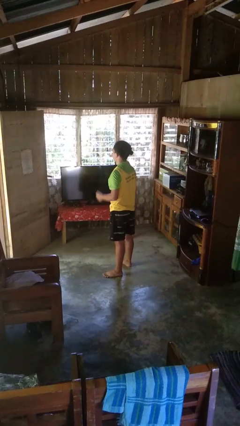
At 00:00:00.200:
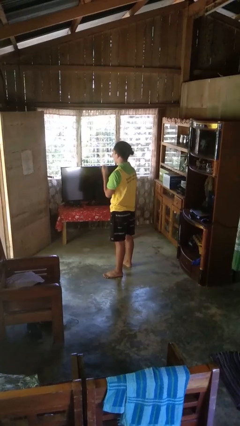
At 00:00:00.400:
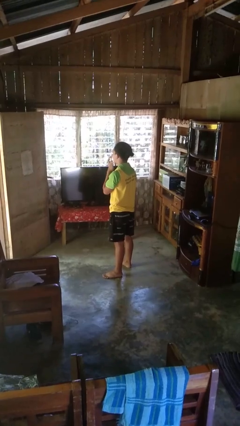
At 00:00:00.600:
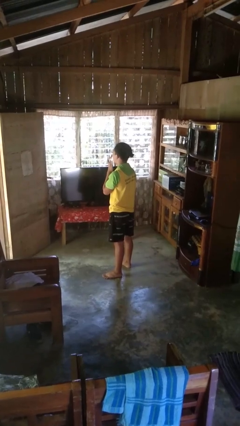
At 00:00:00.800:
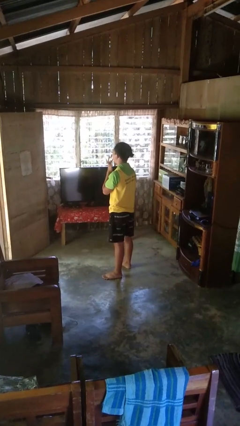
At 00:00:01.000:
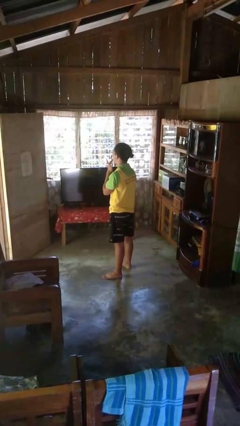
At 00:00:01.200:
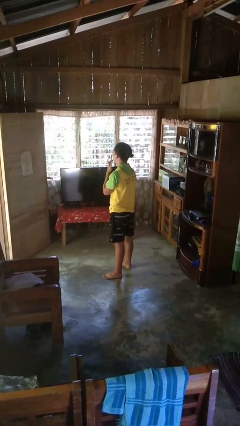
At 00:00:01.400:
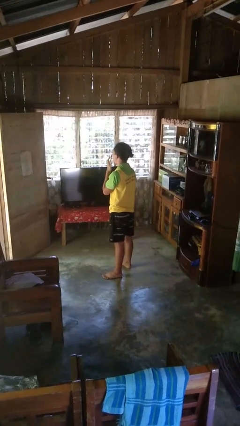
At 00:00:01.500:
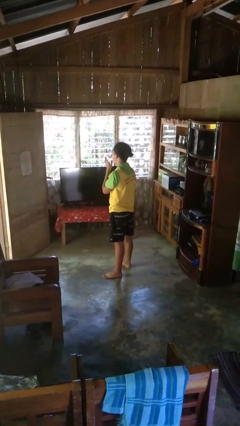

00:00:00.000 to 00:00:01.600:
person licks fingers

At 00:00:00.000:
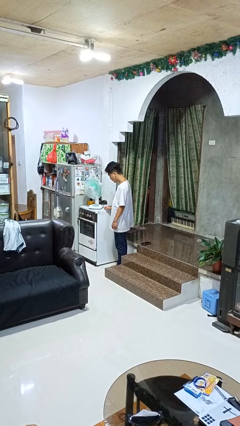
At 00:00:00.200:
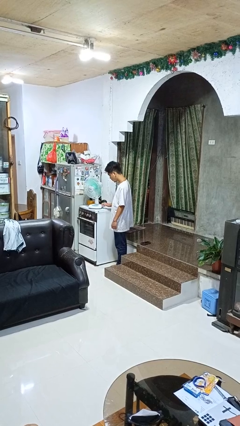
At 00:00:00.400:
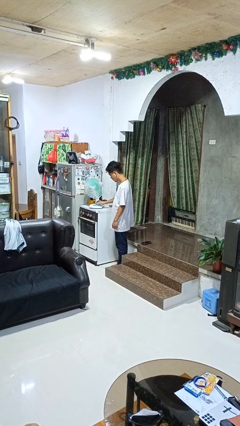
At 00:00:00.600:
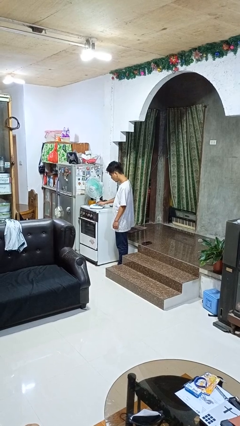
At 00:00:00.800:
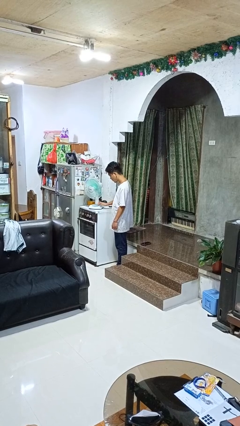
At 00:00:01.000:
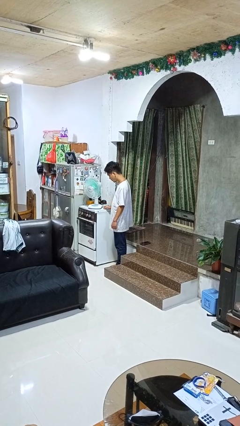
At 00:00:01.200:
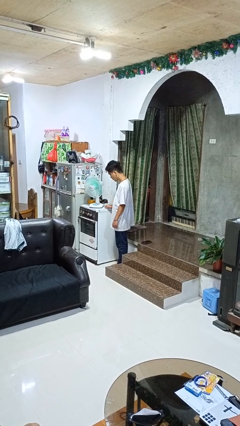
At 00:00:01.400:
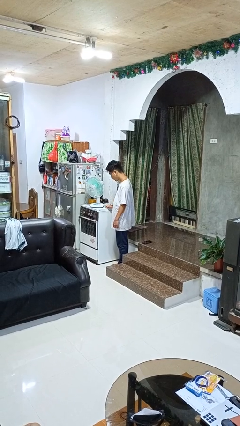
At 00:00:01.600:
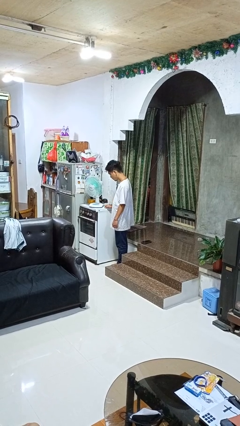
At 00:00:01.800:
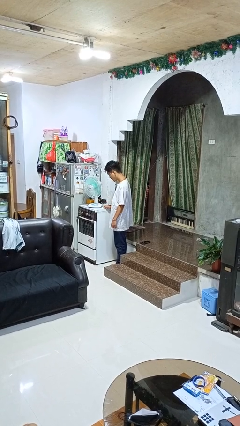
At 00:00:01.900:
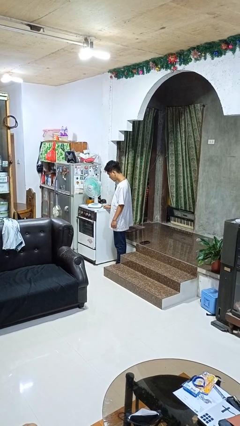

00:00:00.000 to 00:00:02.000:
person turns on fan

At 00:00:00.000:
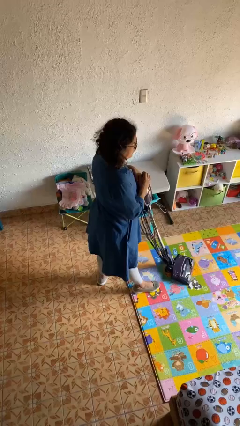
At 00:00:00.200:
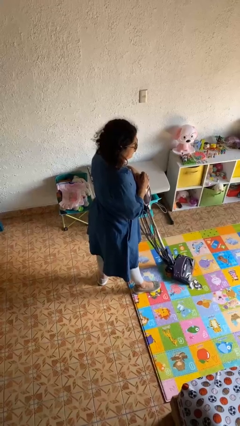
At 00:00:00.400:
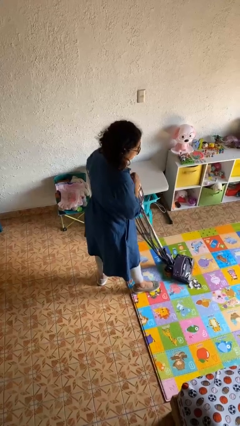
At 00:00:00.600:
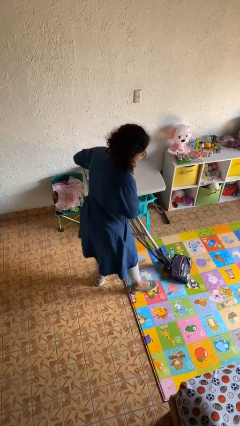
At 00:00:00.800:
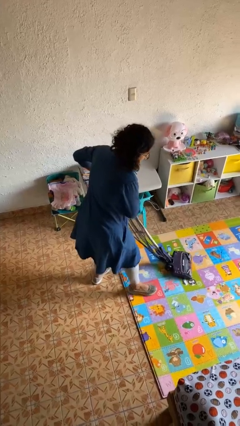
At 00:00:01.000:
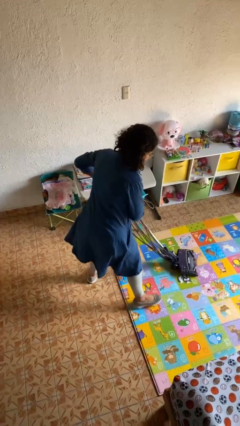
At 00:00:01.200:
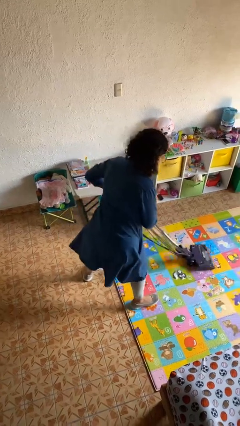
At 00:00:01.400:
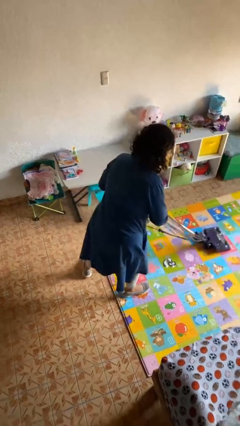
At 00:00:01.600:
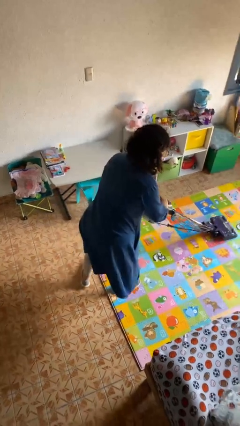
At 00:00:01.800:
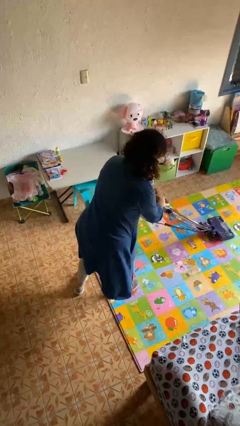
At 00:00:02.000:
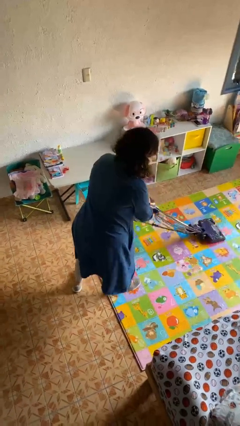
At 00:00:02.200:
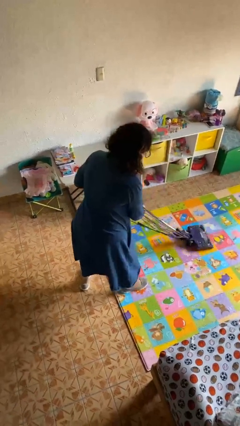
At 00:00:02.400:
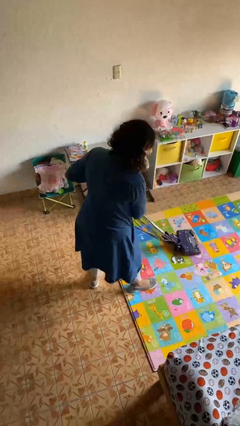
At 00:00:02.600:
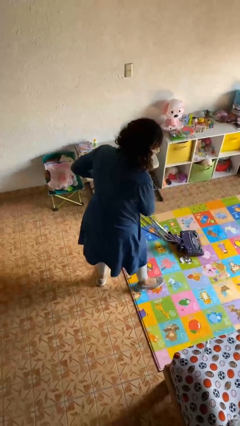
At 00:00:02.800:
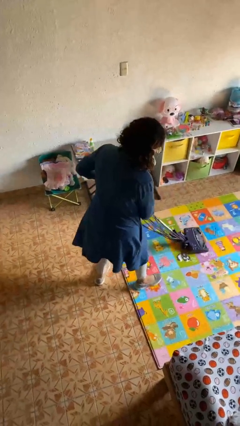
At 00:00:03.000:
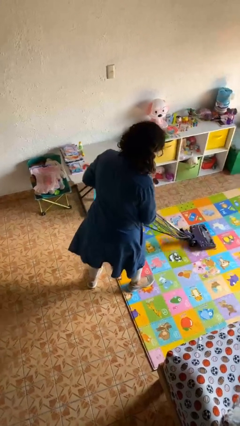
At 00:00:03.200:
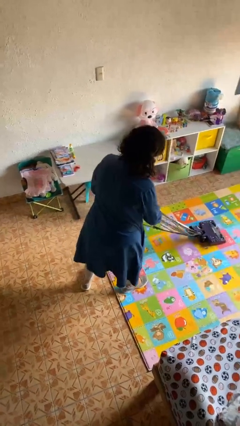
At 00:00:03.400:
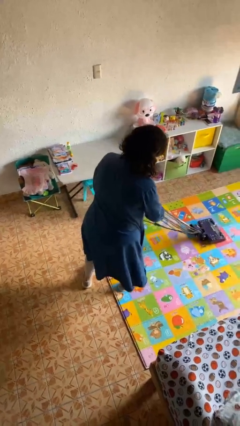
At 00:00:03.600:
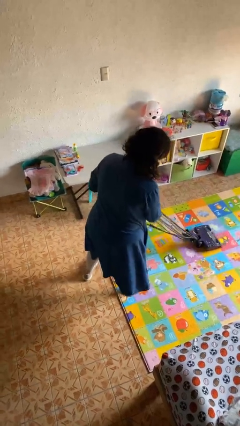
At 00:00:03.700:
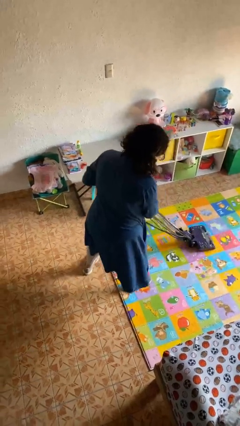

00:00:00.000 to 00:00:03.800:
person vacuums carpet

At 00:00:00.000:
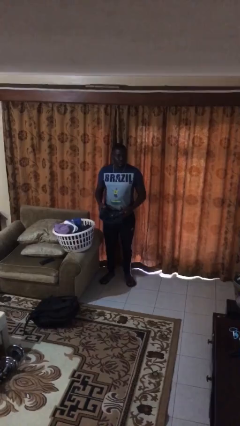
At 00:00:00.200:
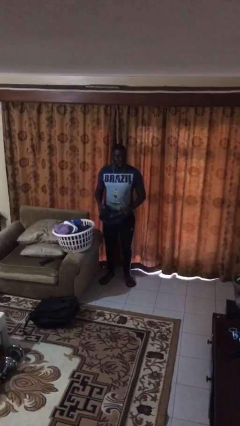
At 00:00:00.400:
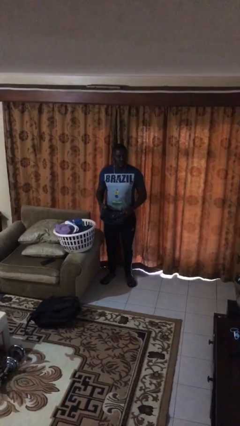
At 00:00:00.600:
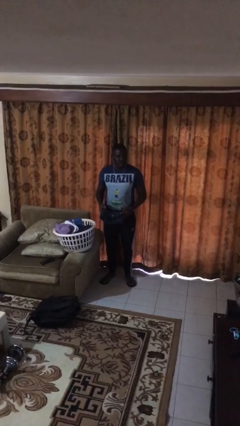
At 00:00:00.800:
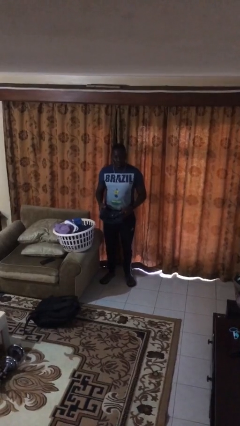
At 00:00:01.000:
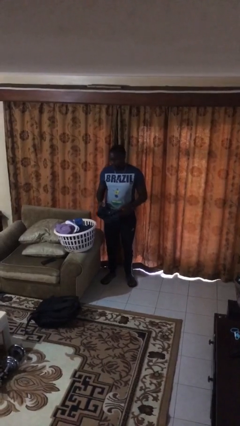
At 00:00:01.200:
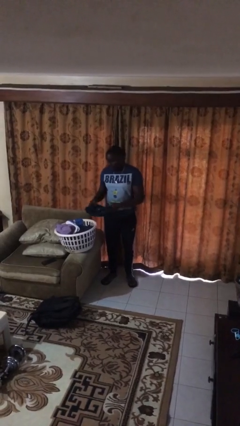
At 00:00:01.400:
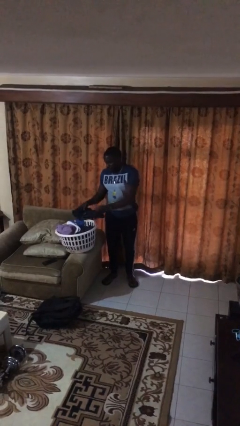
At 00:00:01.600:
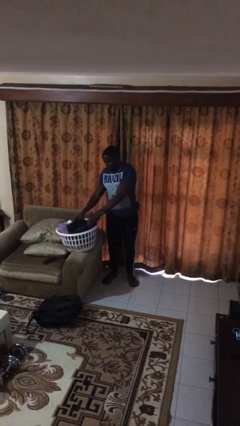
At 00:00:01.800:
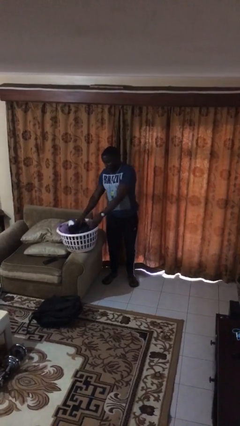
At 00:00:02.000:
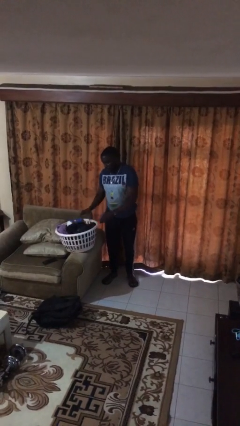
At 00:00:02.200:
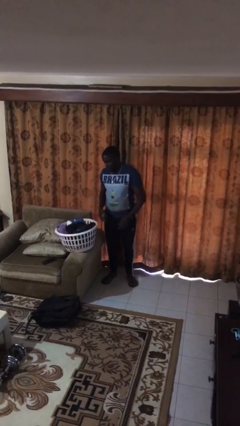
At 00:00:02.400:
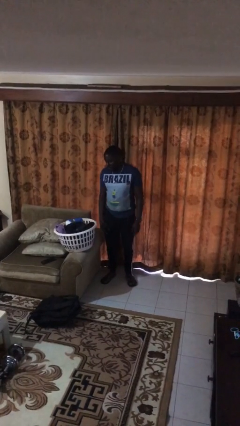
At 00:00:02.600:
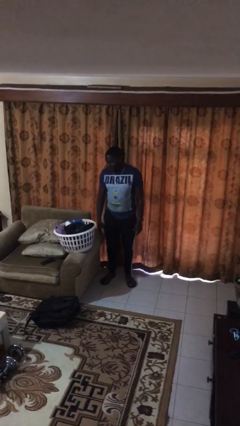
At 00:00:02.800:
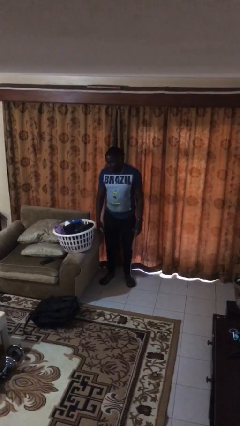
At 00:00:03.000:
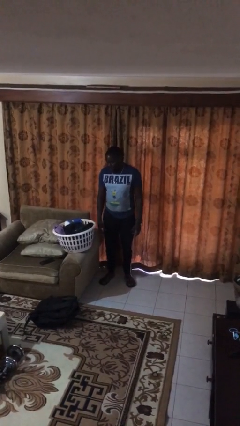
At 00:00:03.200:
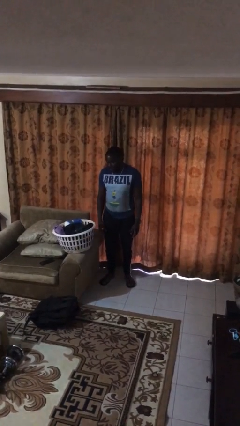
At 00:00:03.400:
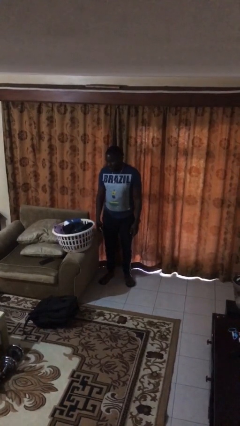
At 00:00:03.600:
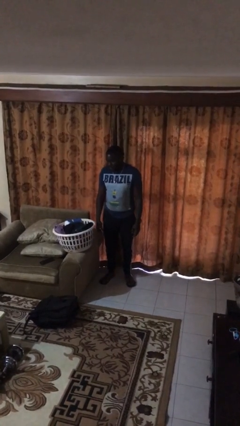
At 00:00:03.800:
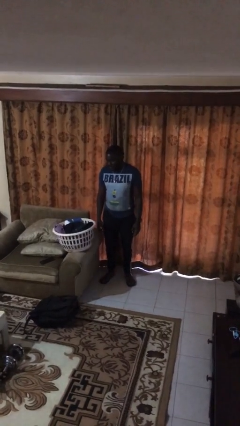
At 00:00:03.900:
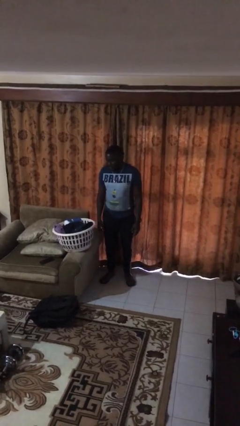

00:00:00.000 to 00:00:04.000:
person puts object into basket

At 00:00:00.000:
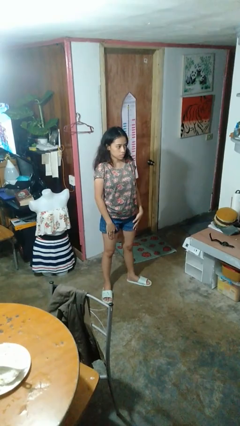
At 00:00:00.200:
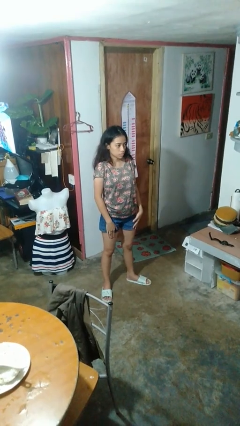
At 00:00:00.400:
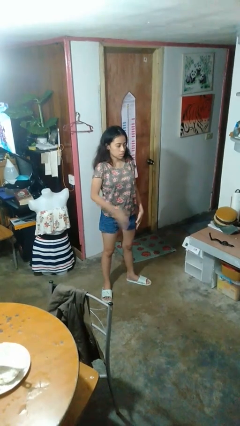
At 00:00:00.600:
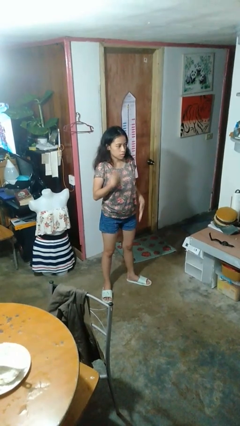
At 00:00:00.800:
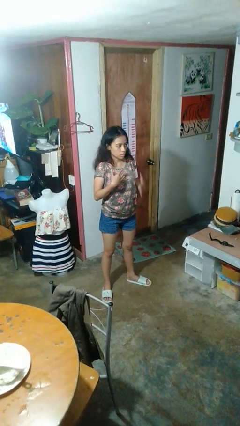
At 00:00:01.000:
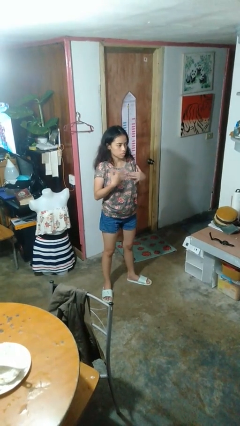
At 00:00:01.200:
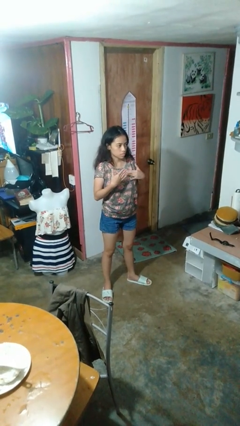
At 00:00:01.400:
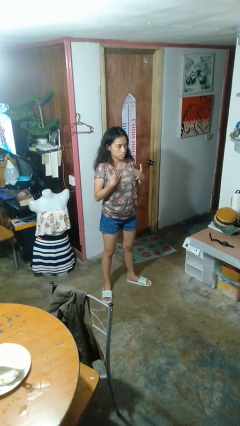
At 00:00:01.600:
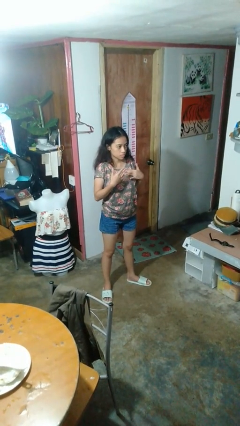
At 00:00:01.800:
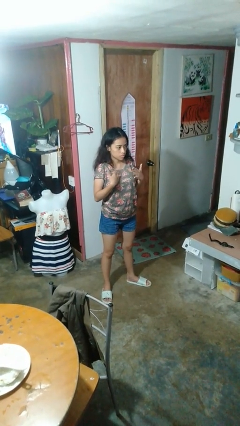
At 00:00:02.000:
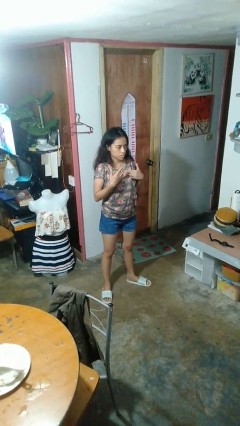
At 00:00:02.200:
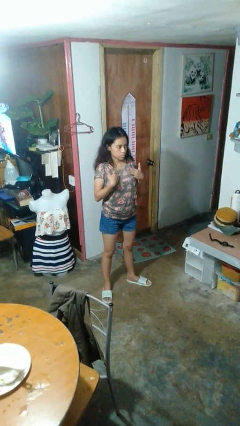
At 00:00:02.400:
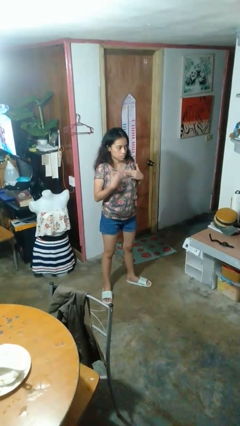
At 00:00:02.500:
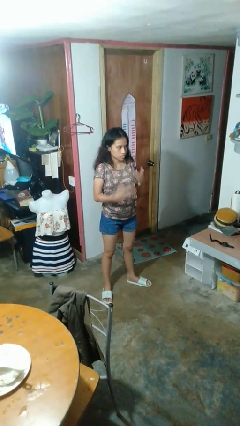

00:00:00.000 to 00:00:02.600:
person drums on chest

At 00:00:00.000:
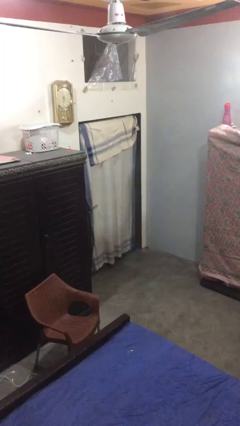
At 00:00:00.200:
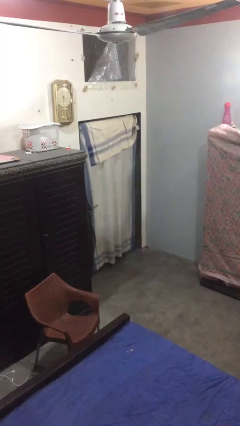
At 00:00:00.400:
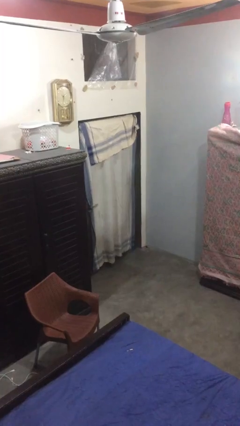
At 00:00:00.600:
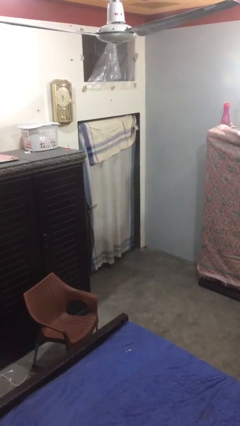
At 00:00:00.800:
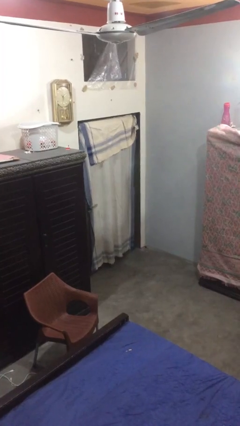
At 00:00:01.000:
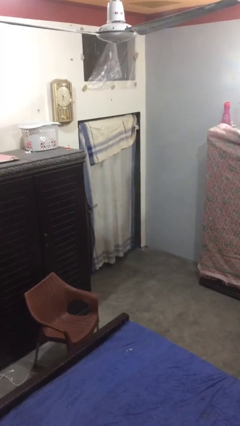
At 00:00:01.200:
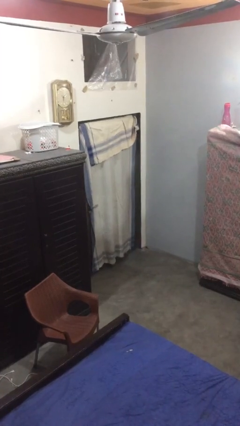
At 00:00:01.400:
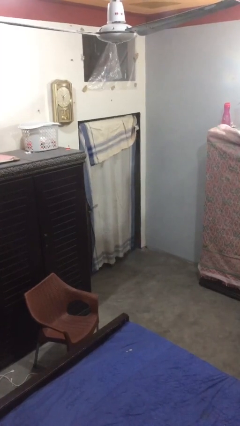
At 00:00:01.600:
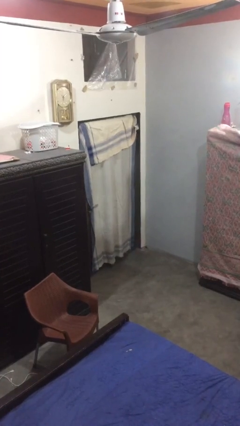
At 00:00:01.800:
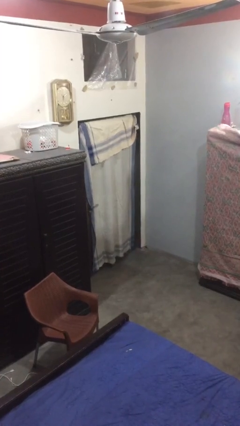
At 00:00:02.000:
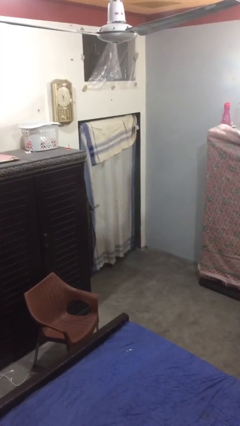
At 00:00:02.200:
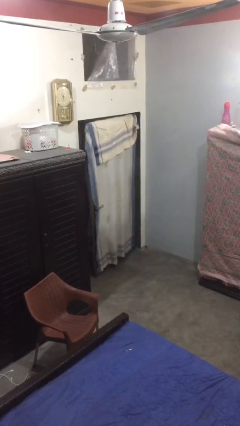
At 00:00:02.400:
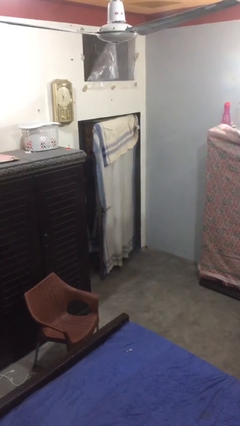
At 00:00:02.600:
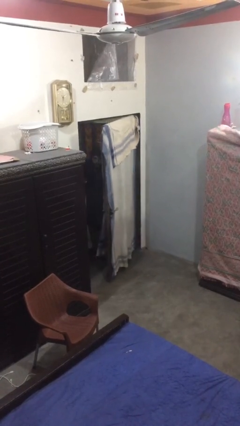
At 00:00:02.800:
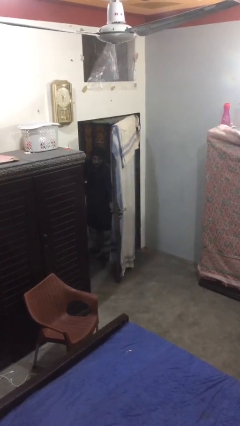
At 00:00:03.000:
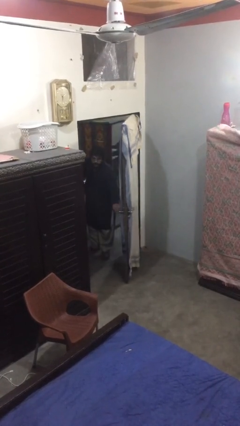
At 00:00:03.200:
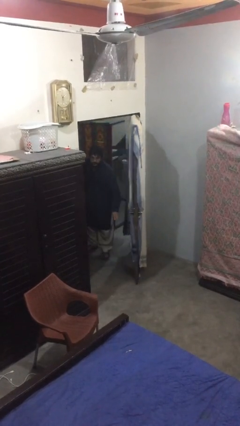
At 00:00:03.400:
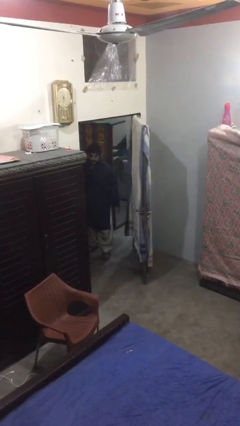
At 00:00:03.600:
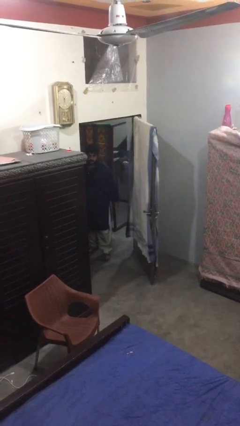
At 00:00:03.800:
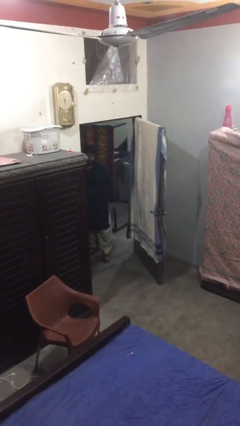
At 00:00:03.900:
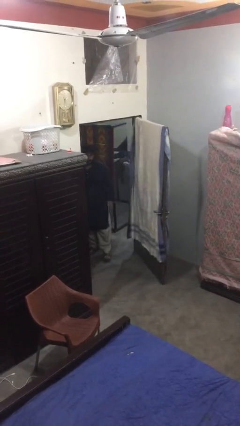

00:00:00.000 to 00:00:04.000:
person opens facility door
